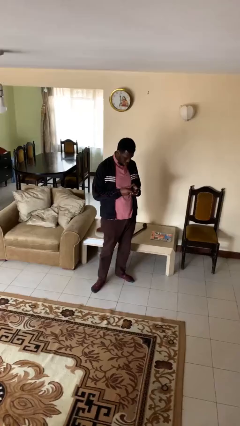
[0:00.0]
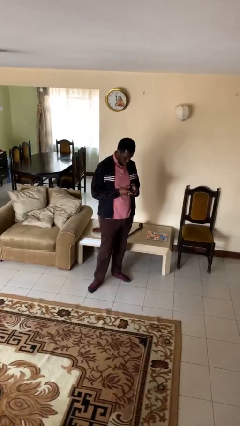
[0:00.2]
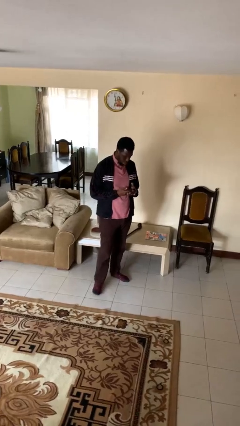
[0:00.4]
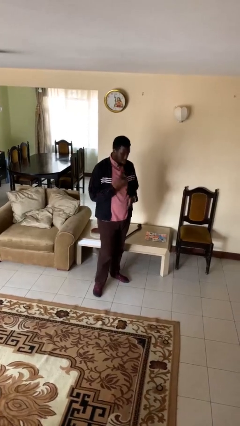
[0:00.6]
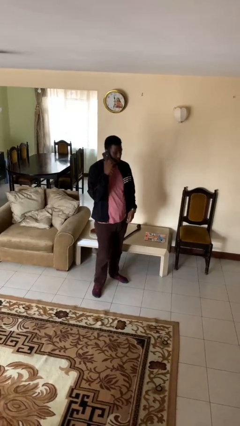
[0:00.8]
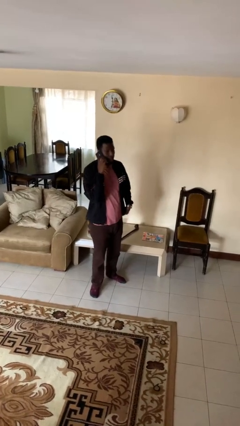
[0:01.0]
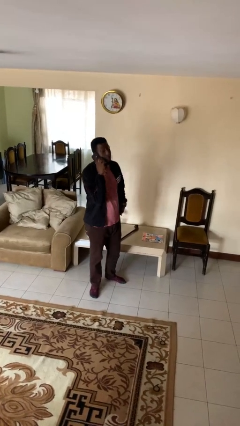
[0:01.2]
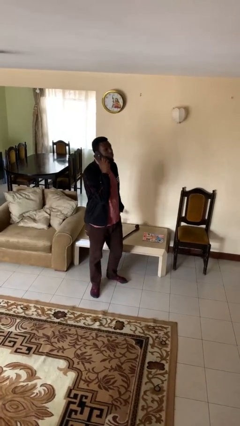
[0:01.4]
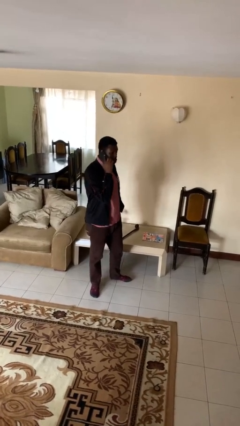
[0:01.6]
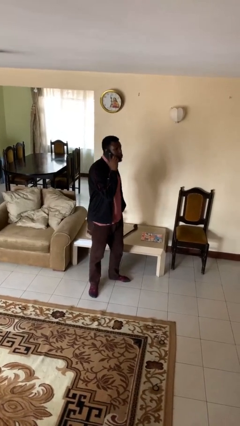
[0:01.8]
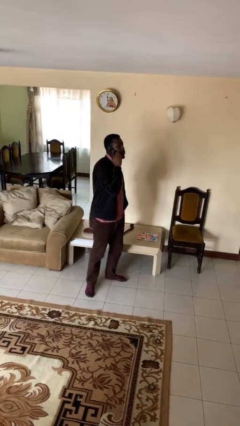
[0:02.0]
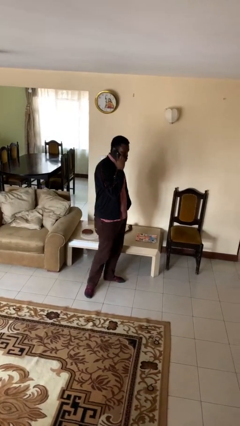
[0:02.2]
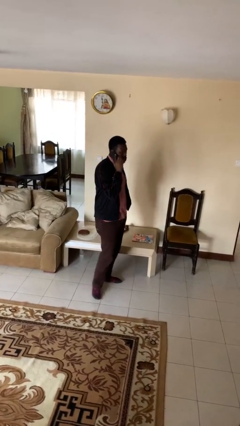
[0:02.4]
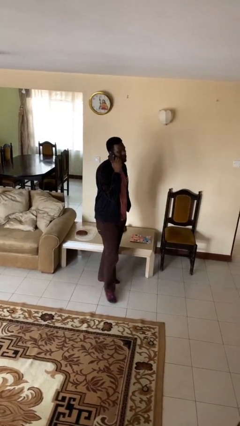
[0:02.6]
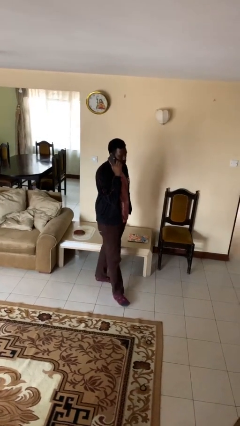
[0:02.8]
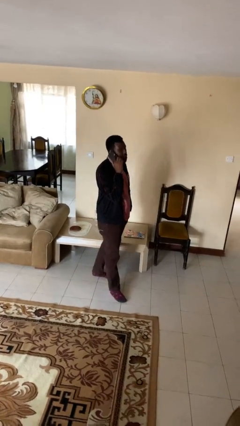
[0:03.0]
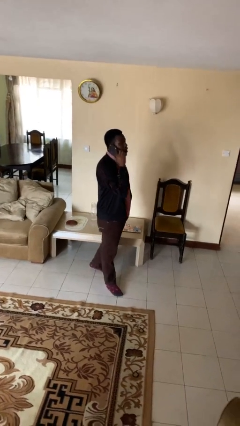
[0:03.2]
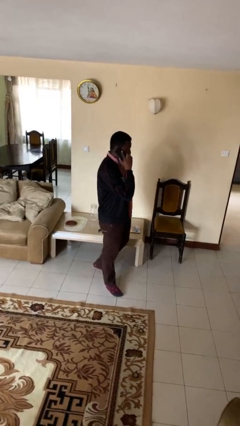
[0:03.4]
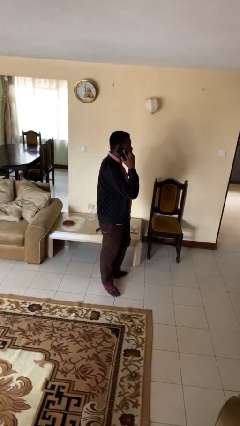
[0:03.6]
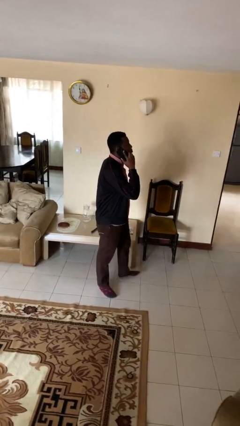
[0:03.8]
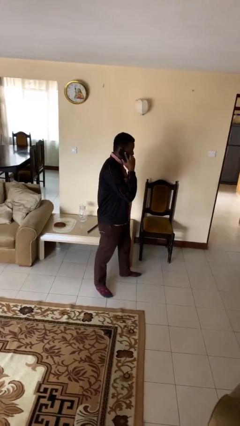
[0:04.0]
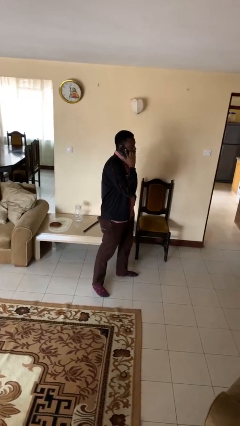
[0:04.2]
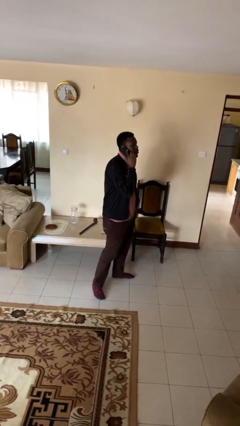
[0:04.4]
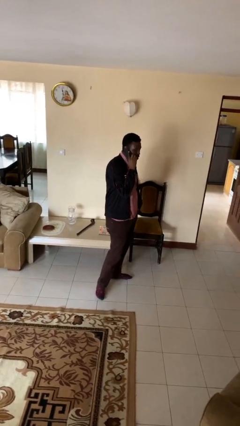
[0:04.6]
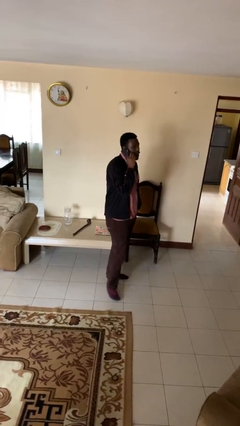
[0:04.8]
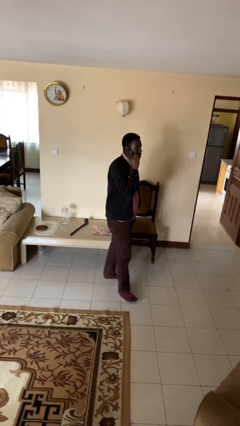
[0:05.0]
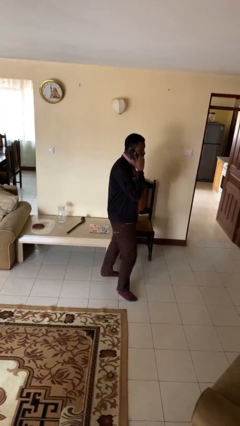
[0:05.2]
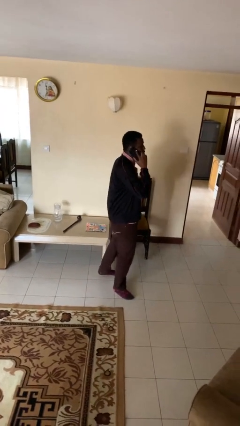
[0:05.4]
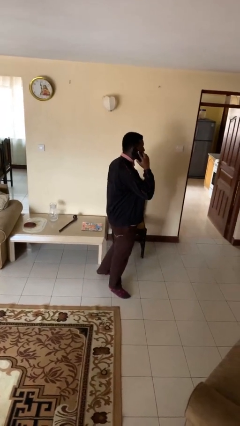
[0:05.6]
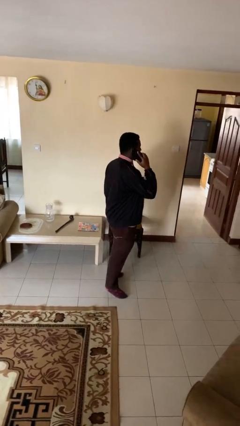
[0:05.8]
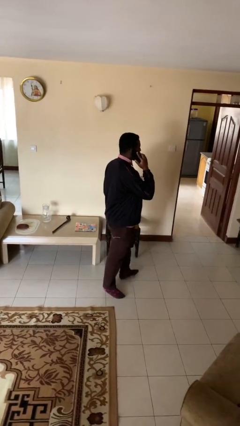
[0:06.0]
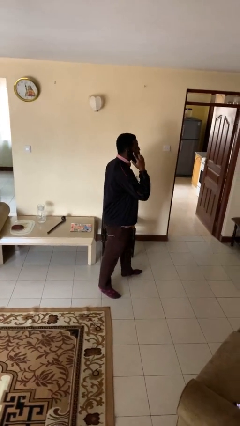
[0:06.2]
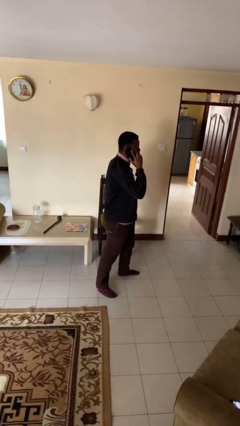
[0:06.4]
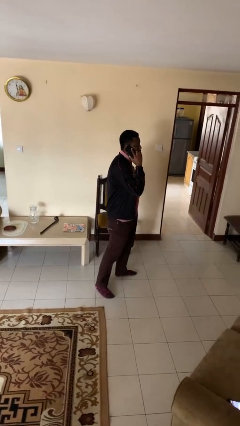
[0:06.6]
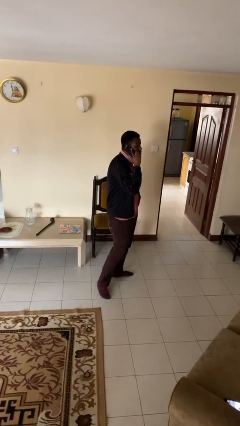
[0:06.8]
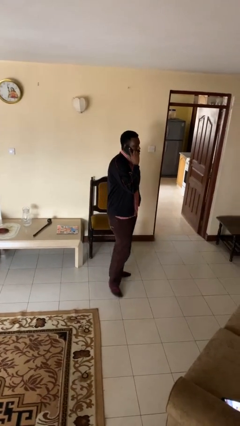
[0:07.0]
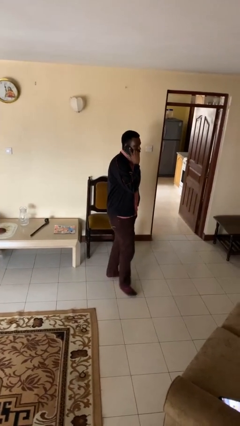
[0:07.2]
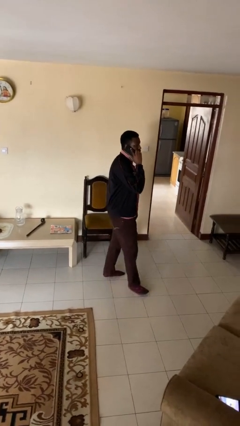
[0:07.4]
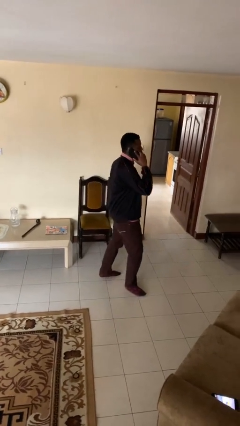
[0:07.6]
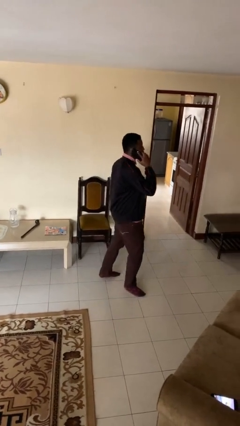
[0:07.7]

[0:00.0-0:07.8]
person talks on phone

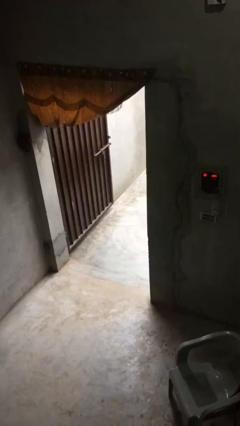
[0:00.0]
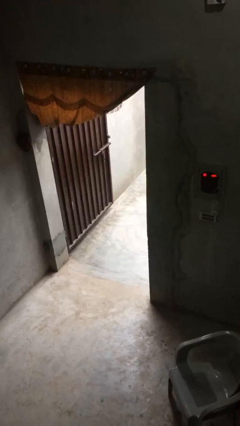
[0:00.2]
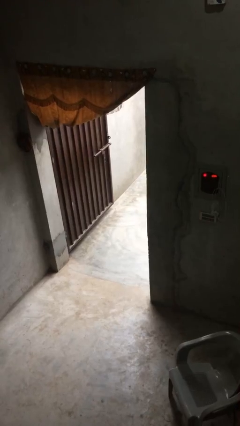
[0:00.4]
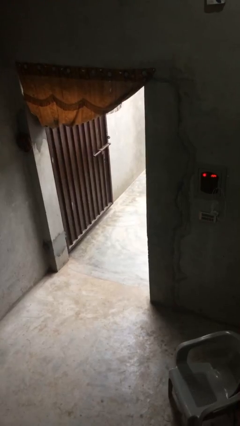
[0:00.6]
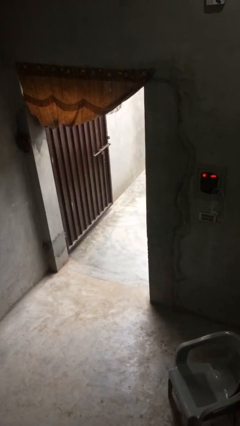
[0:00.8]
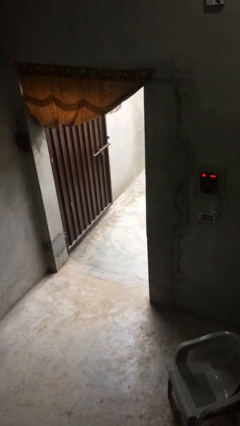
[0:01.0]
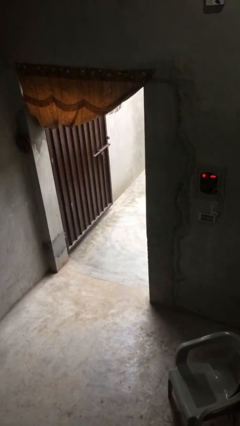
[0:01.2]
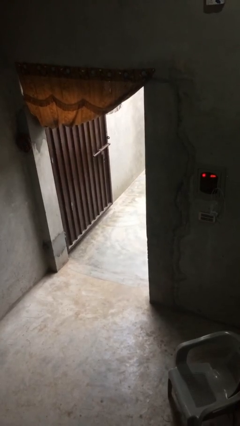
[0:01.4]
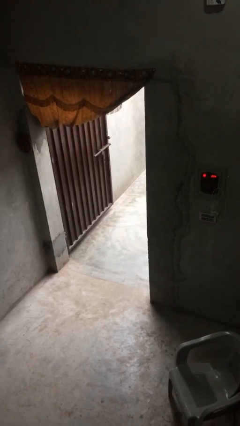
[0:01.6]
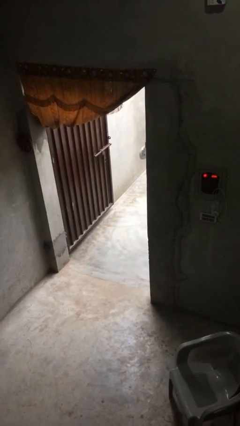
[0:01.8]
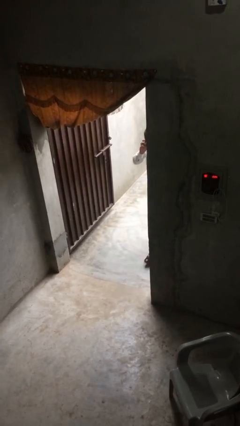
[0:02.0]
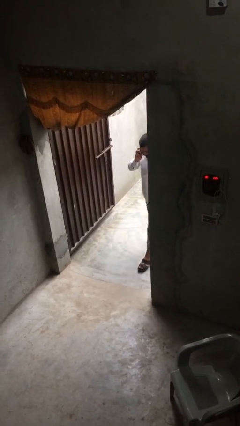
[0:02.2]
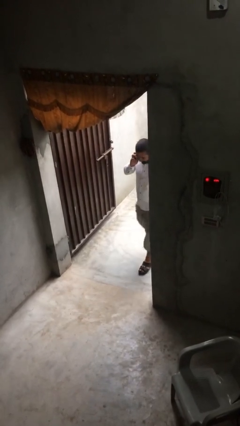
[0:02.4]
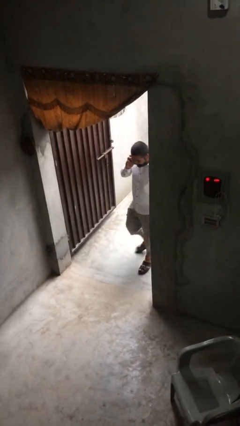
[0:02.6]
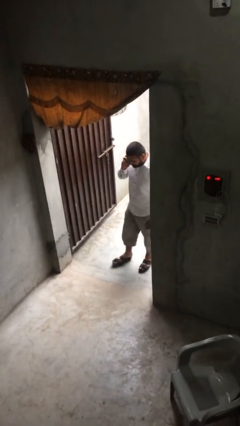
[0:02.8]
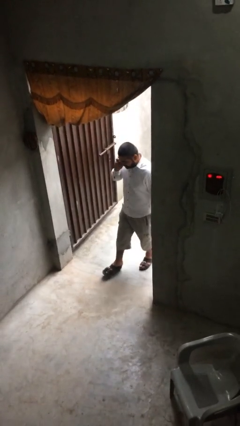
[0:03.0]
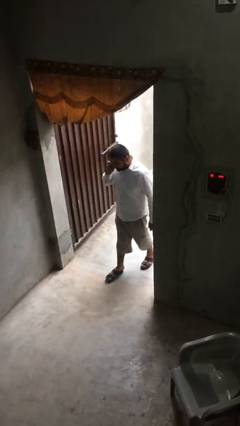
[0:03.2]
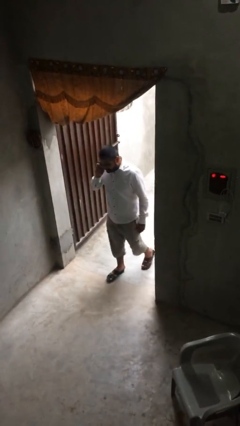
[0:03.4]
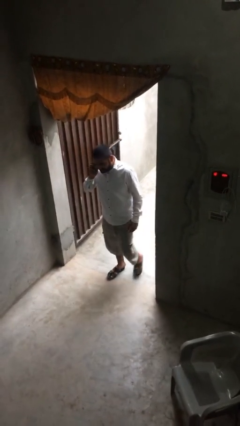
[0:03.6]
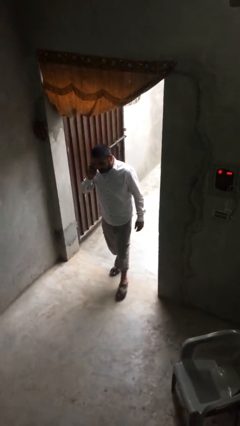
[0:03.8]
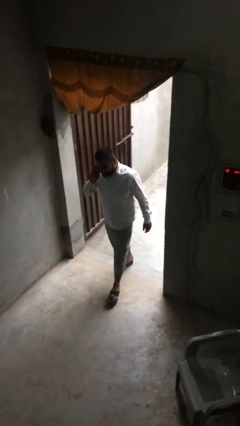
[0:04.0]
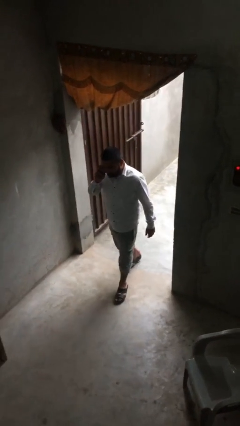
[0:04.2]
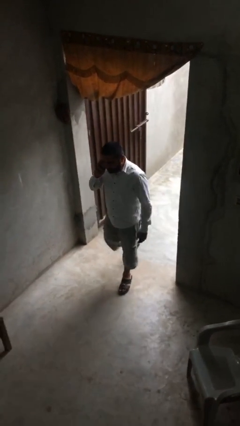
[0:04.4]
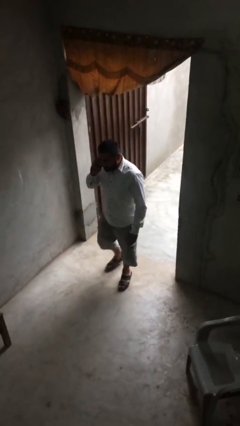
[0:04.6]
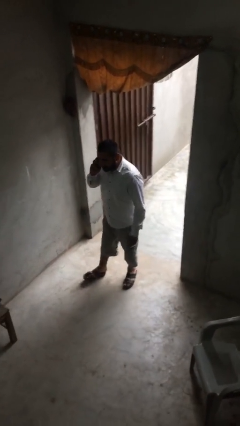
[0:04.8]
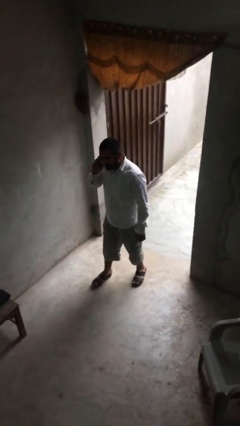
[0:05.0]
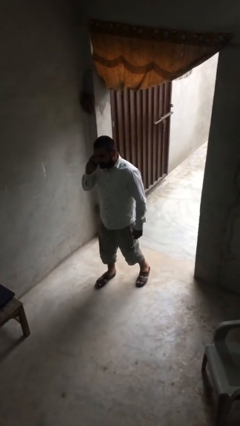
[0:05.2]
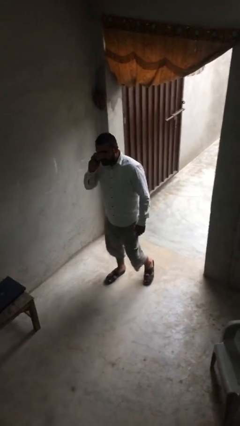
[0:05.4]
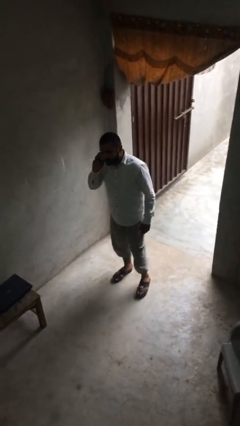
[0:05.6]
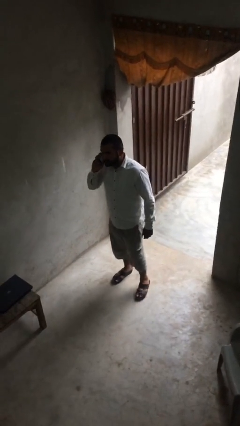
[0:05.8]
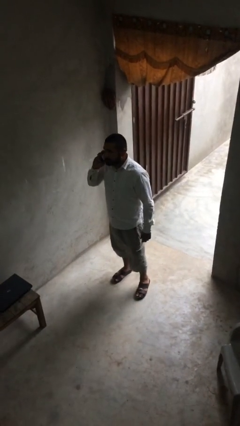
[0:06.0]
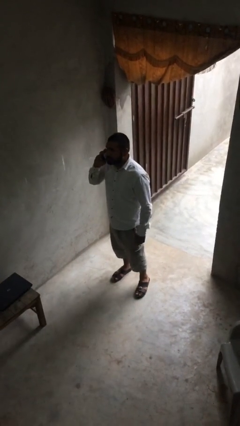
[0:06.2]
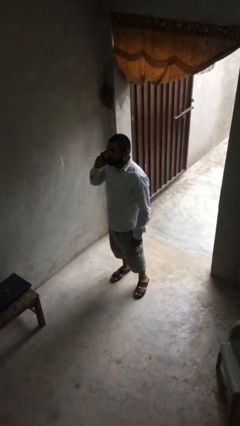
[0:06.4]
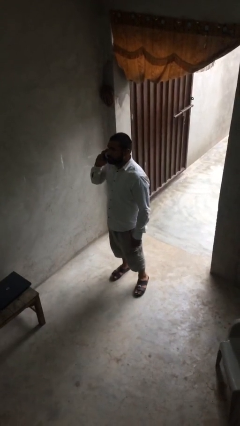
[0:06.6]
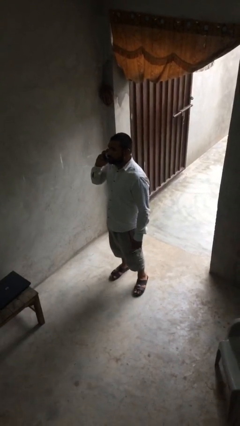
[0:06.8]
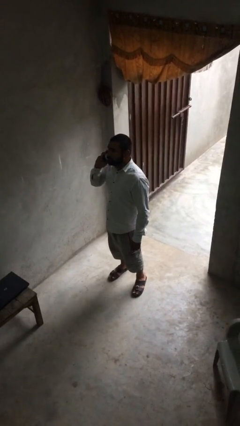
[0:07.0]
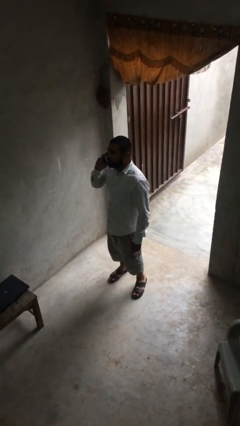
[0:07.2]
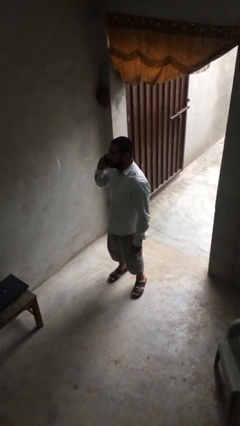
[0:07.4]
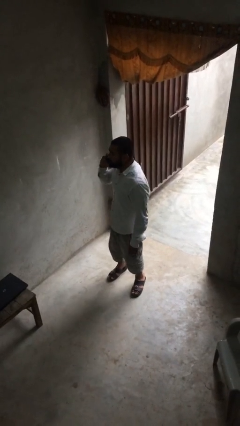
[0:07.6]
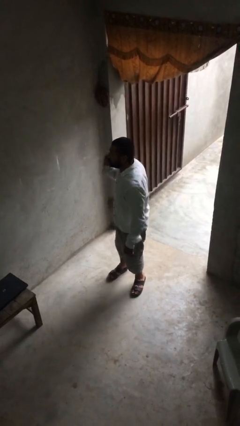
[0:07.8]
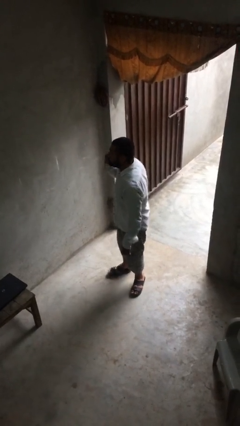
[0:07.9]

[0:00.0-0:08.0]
person enters scene through structure

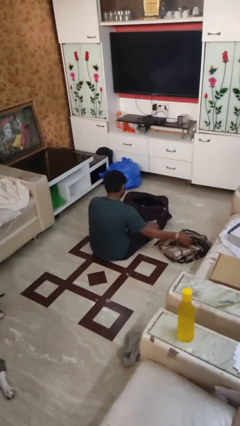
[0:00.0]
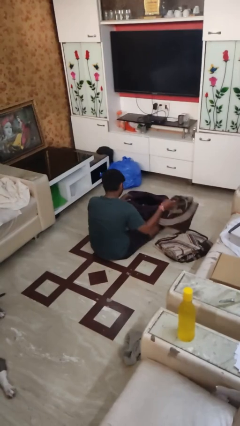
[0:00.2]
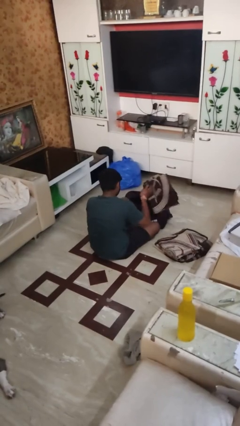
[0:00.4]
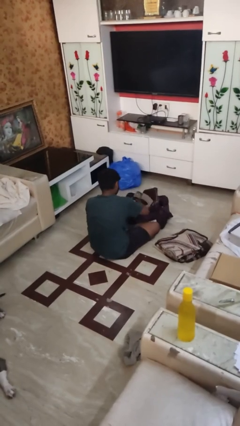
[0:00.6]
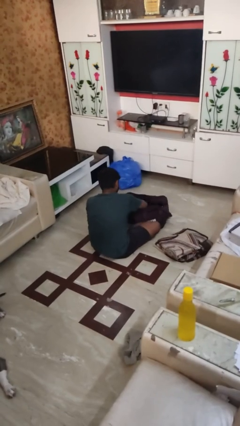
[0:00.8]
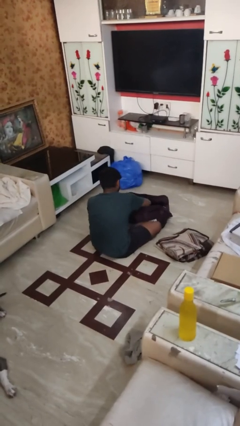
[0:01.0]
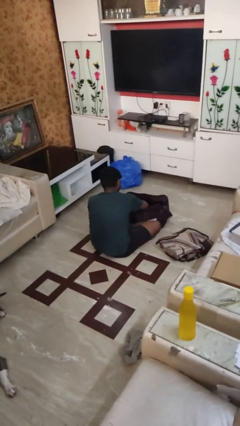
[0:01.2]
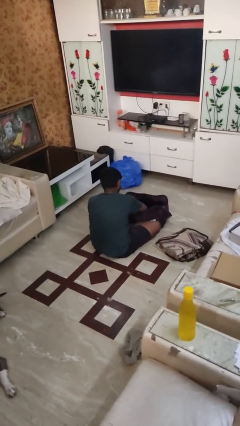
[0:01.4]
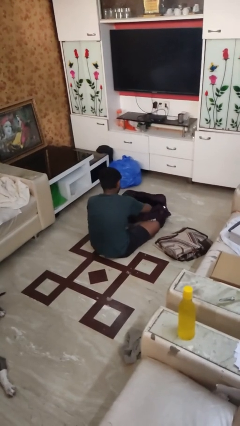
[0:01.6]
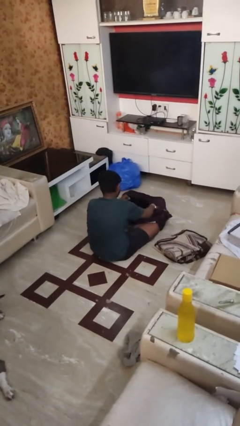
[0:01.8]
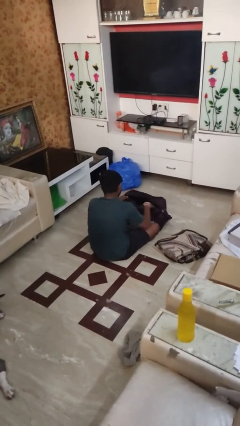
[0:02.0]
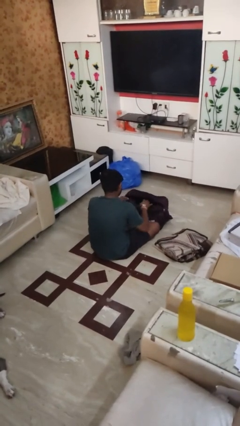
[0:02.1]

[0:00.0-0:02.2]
person loads clothes into suitcase
